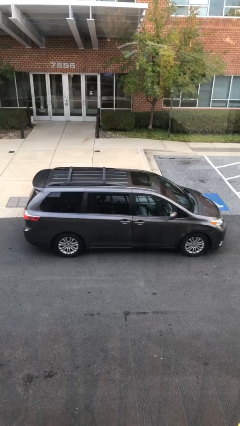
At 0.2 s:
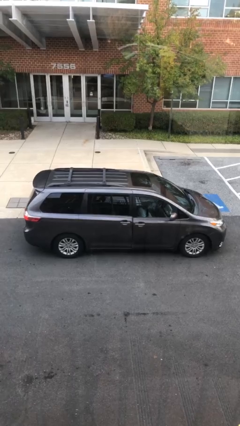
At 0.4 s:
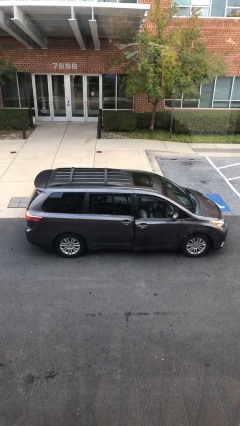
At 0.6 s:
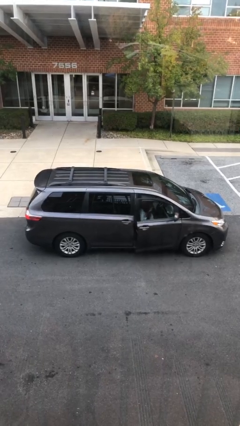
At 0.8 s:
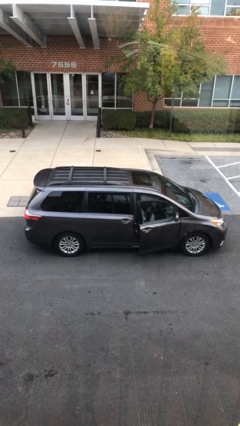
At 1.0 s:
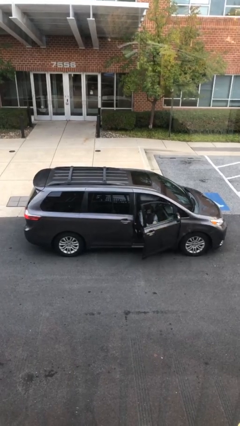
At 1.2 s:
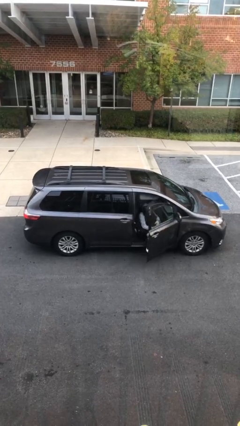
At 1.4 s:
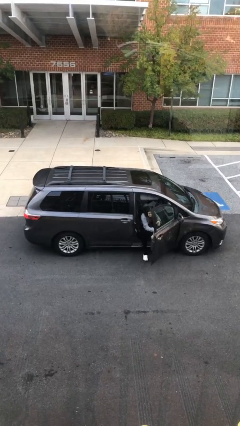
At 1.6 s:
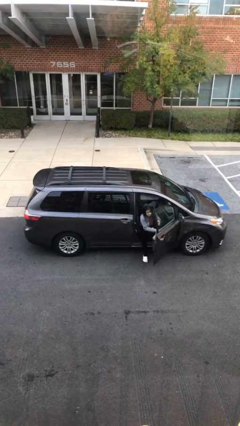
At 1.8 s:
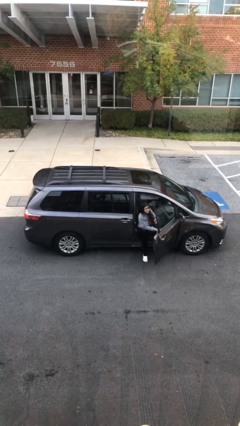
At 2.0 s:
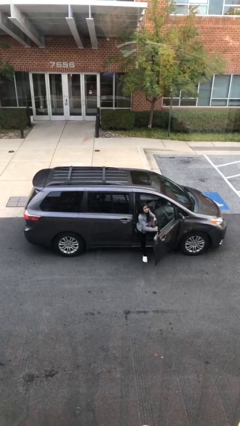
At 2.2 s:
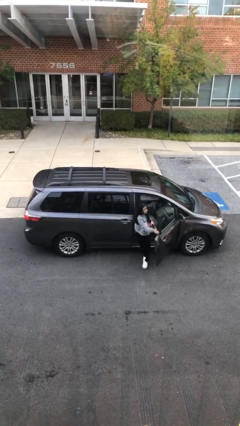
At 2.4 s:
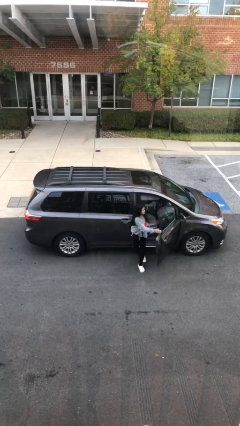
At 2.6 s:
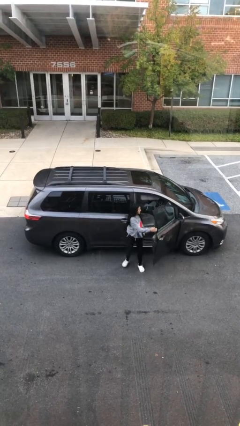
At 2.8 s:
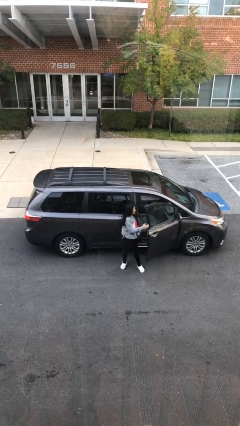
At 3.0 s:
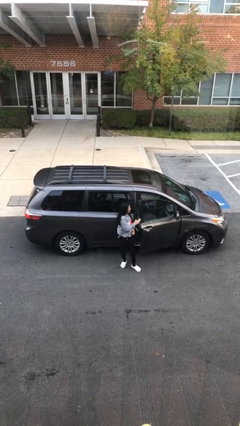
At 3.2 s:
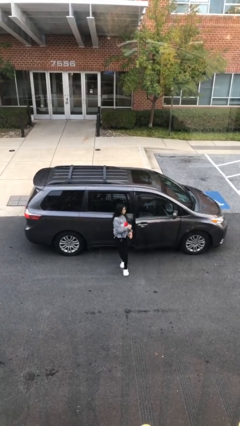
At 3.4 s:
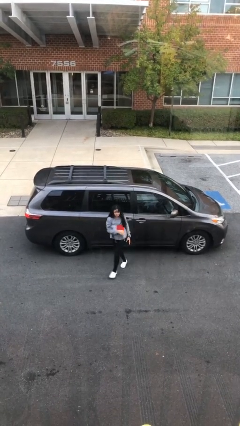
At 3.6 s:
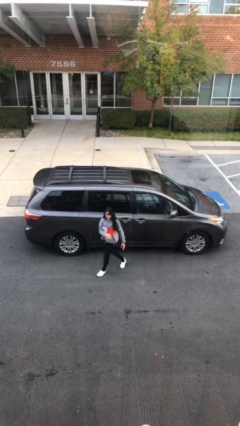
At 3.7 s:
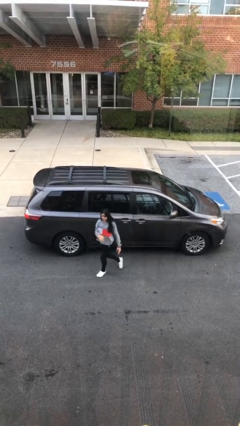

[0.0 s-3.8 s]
car drops off person

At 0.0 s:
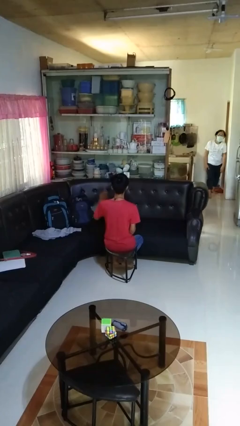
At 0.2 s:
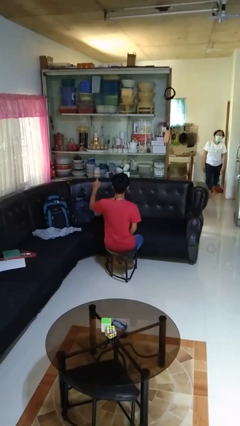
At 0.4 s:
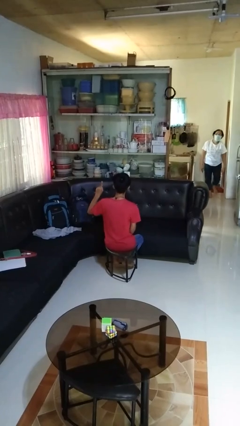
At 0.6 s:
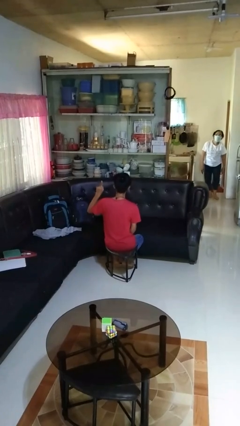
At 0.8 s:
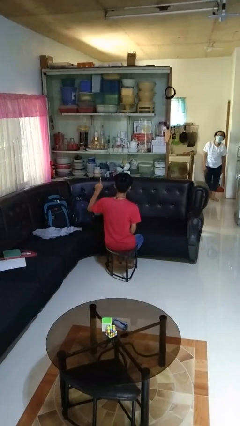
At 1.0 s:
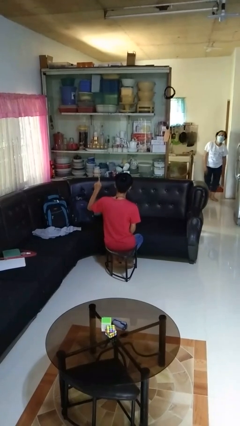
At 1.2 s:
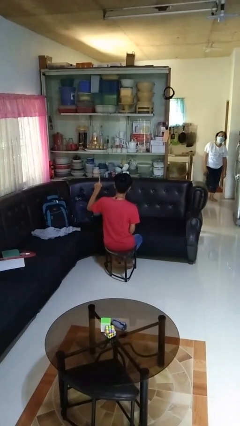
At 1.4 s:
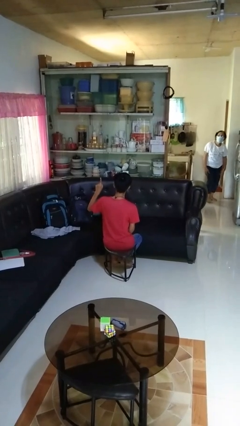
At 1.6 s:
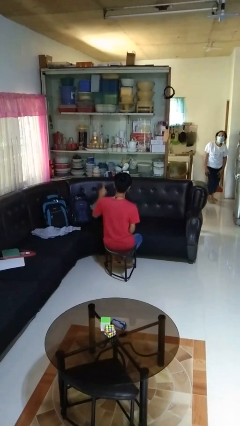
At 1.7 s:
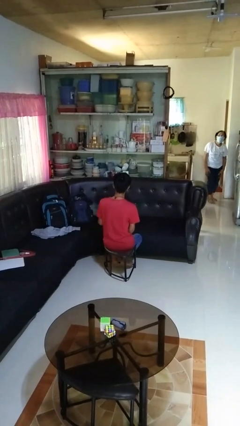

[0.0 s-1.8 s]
person gestures number one

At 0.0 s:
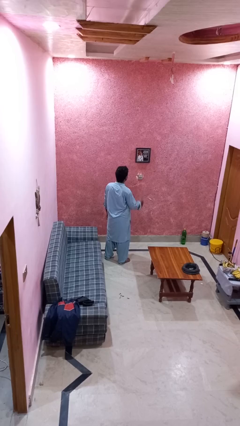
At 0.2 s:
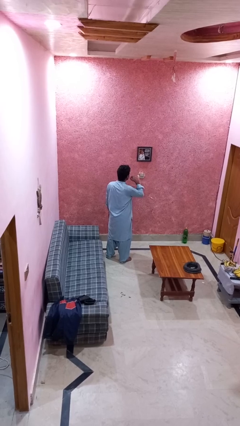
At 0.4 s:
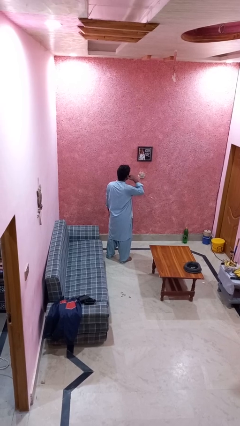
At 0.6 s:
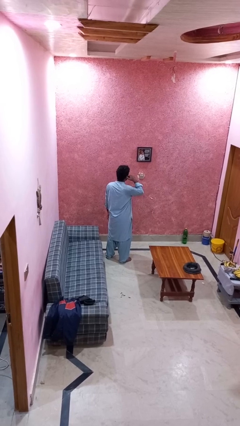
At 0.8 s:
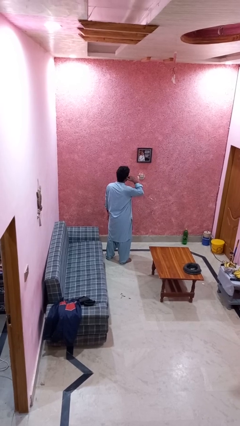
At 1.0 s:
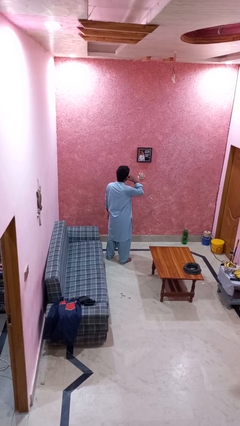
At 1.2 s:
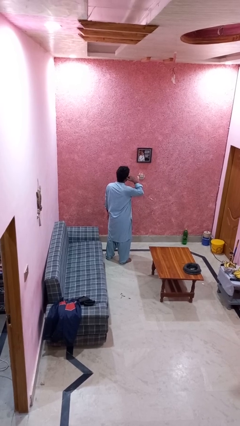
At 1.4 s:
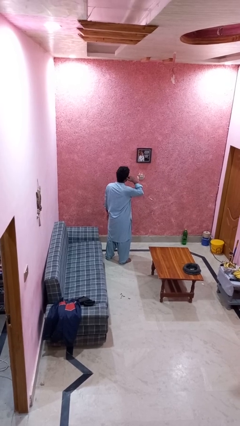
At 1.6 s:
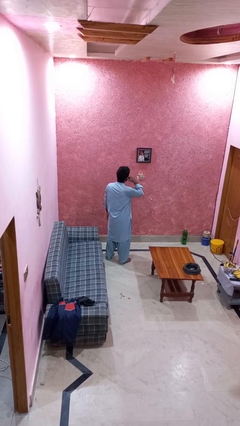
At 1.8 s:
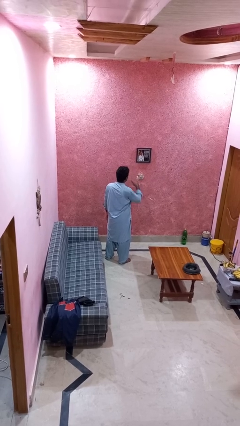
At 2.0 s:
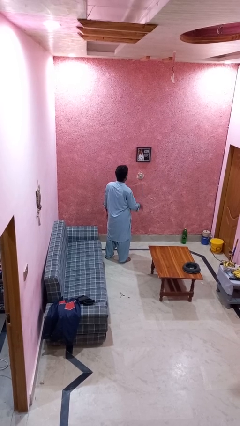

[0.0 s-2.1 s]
person gestures call me

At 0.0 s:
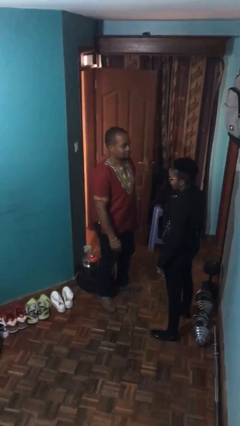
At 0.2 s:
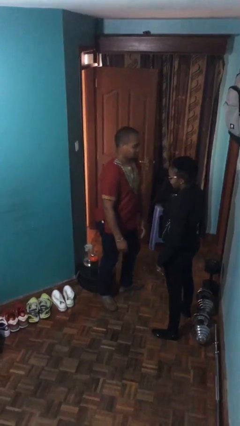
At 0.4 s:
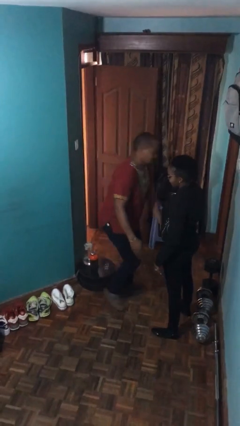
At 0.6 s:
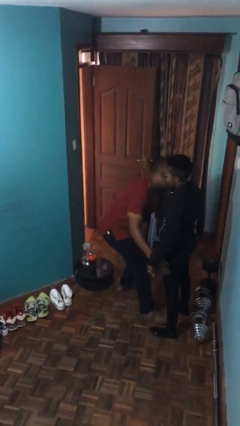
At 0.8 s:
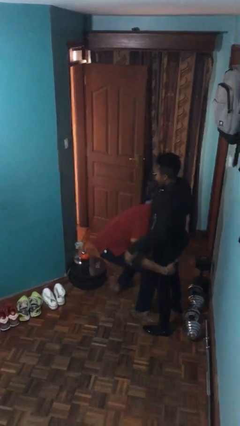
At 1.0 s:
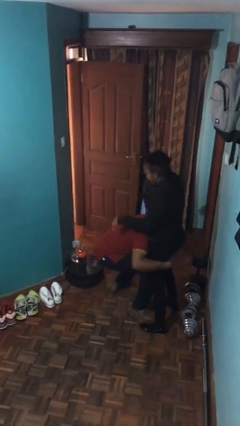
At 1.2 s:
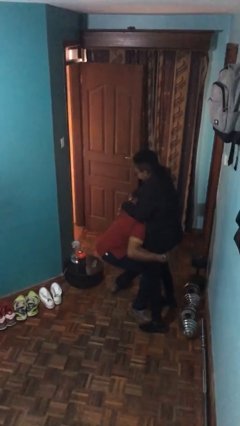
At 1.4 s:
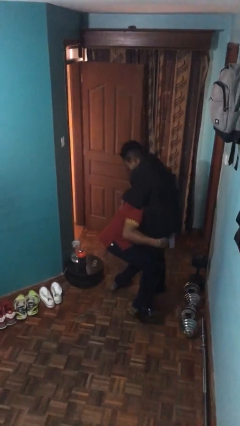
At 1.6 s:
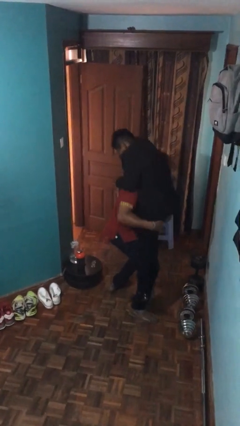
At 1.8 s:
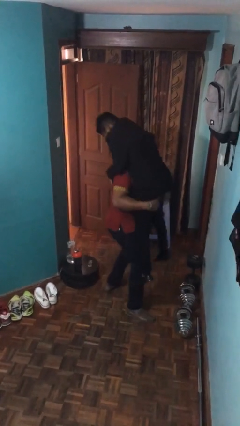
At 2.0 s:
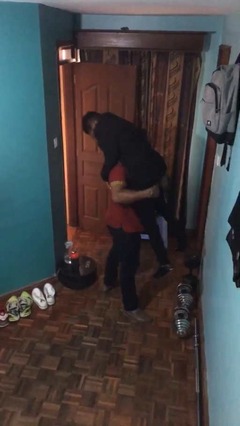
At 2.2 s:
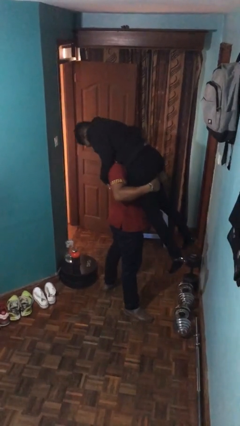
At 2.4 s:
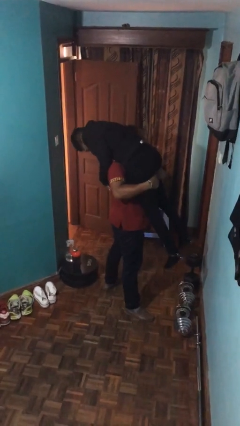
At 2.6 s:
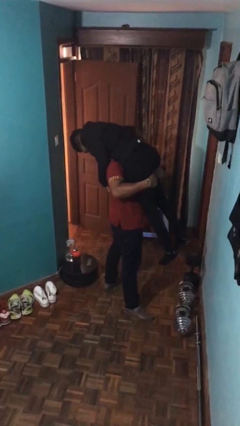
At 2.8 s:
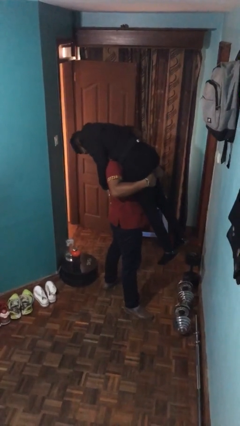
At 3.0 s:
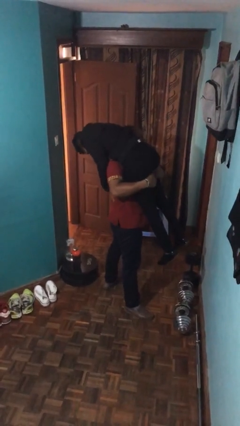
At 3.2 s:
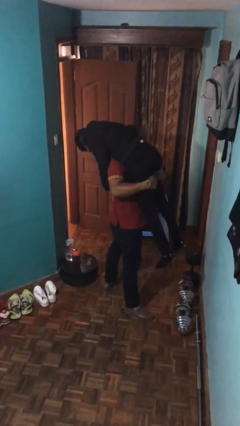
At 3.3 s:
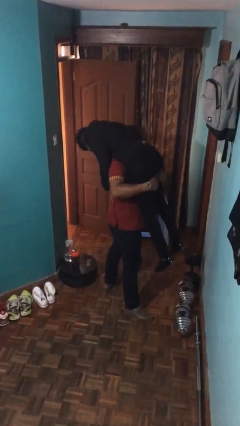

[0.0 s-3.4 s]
person carries person over shoulder

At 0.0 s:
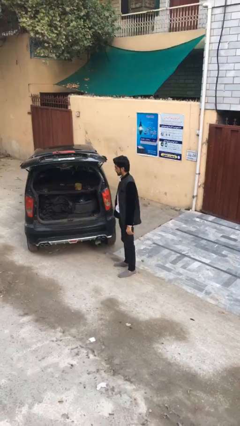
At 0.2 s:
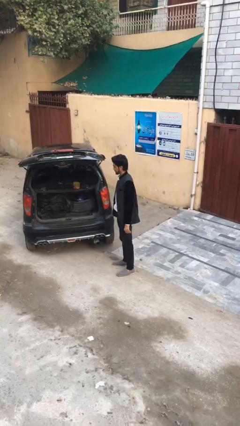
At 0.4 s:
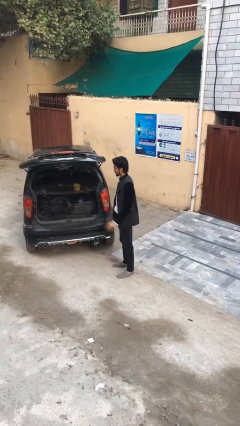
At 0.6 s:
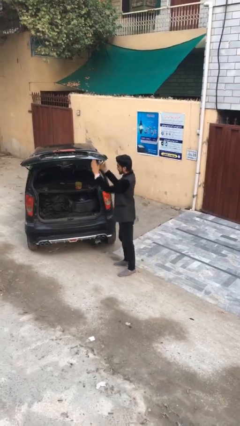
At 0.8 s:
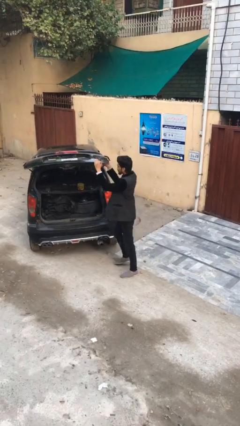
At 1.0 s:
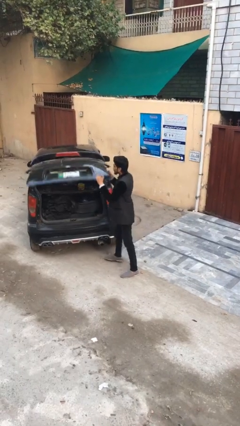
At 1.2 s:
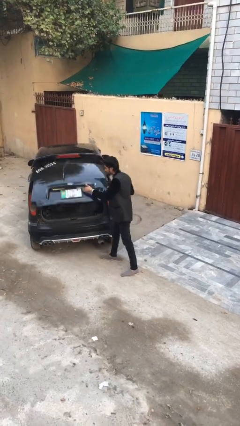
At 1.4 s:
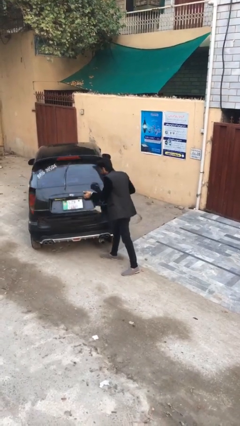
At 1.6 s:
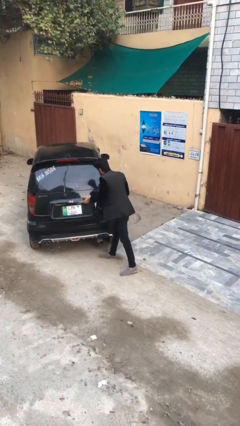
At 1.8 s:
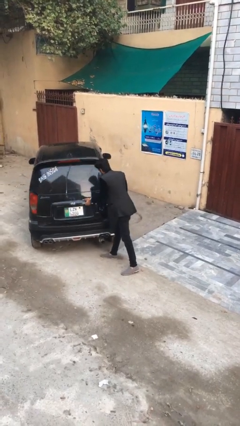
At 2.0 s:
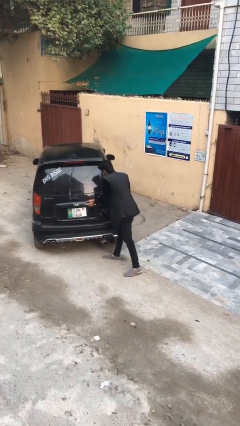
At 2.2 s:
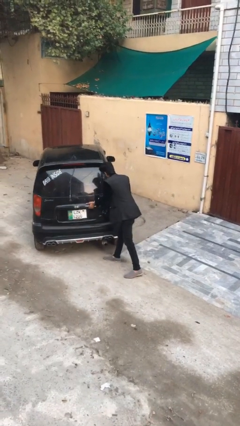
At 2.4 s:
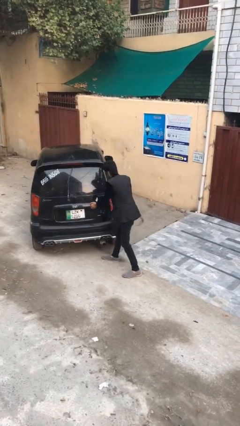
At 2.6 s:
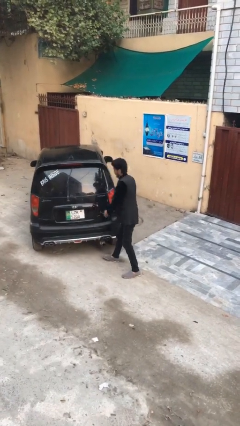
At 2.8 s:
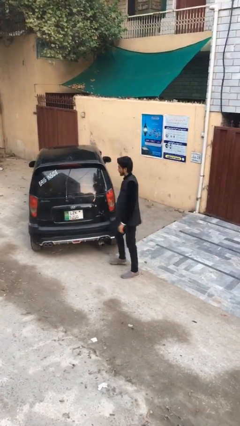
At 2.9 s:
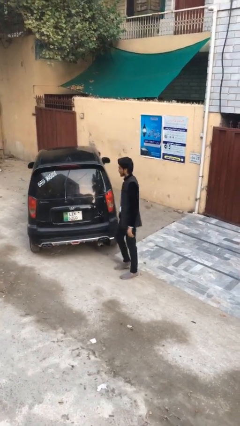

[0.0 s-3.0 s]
person closes car trunk

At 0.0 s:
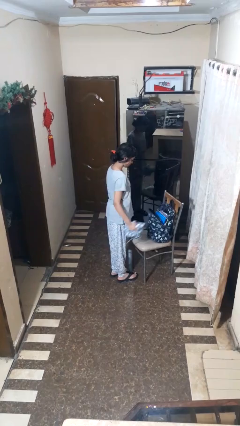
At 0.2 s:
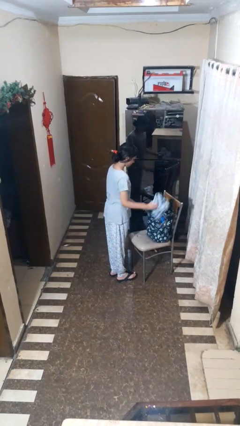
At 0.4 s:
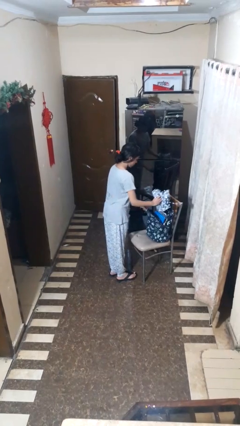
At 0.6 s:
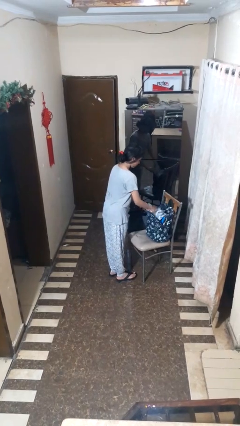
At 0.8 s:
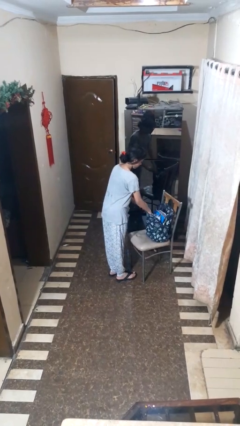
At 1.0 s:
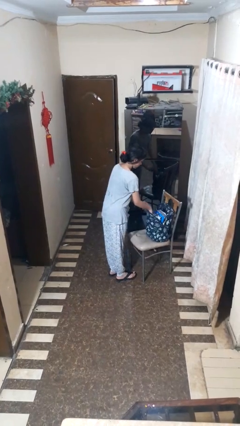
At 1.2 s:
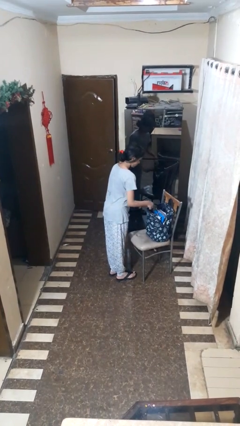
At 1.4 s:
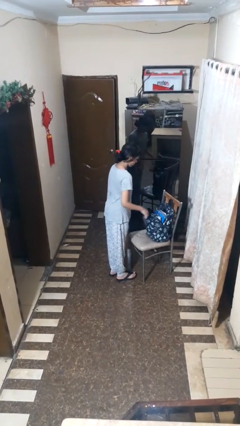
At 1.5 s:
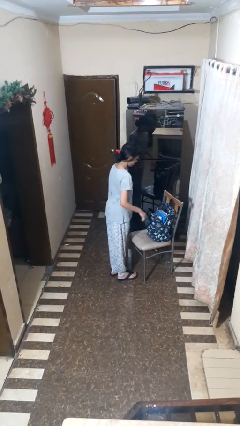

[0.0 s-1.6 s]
person puts object into bag

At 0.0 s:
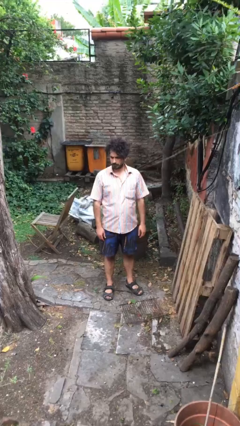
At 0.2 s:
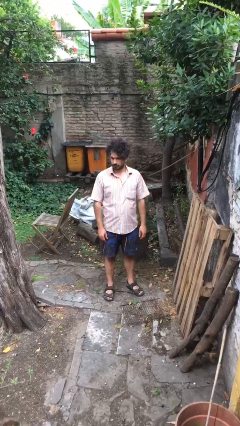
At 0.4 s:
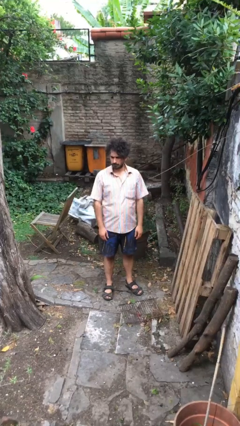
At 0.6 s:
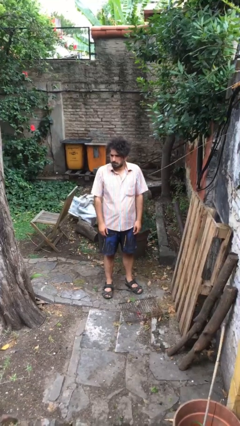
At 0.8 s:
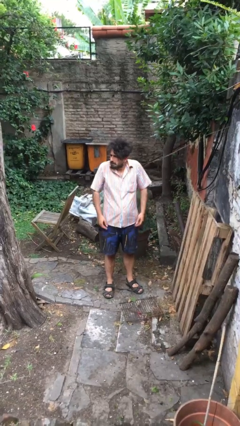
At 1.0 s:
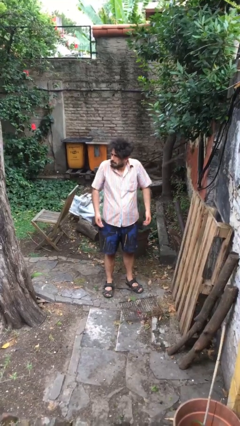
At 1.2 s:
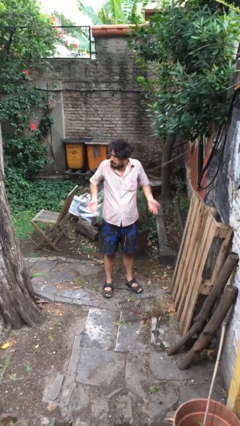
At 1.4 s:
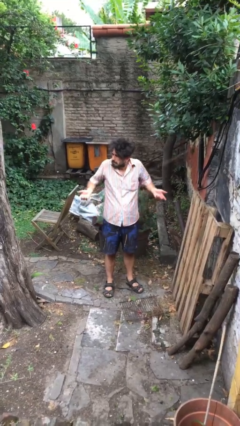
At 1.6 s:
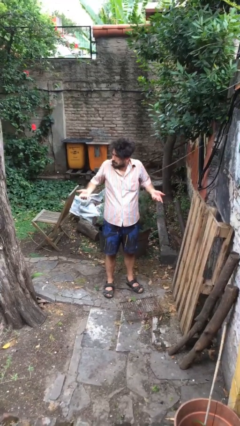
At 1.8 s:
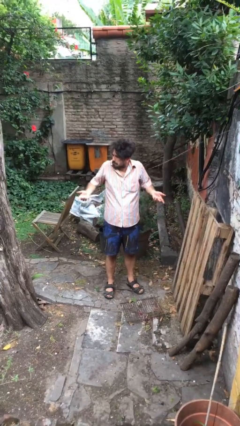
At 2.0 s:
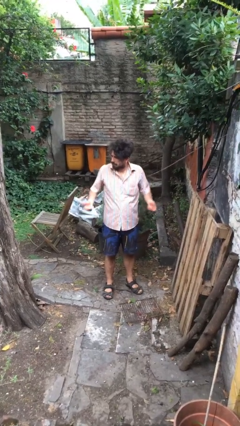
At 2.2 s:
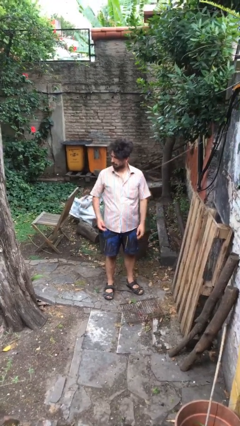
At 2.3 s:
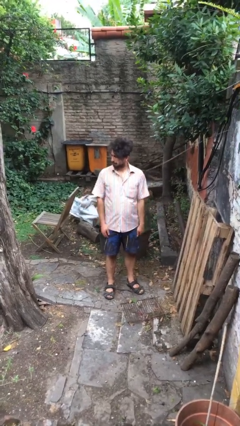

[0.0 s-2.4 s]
person shrugs
